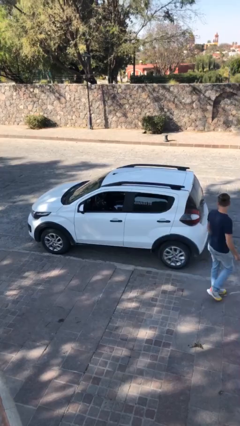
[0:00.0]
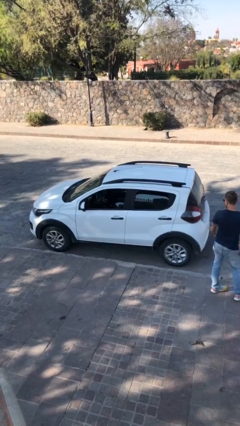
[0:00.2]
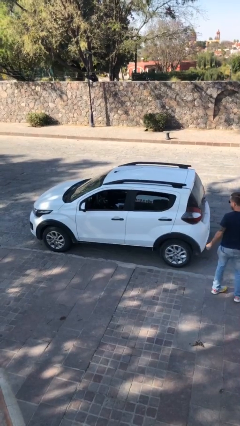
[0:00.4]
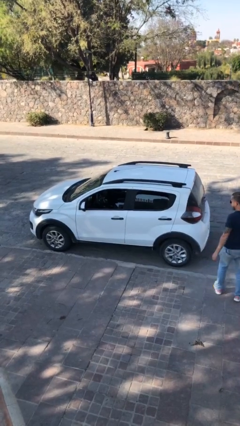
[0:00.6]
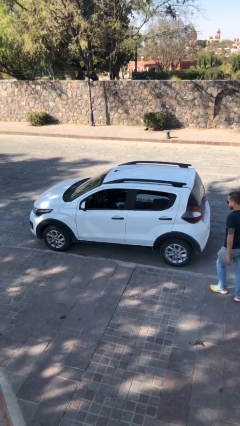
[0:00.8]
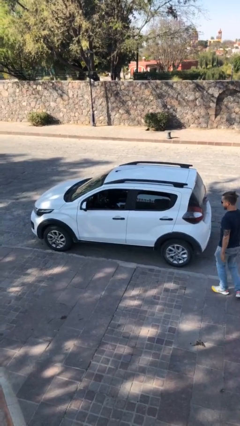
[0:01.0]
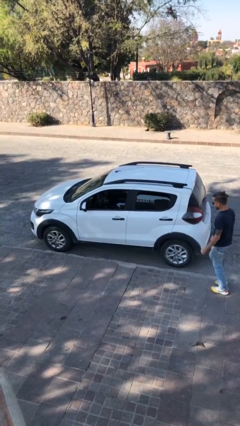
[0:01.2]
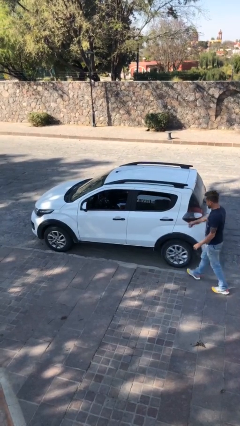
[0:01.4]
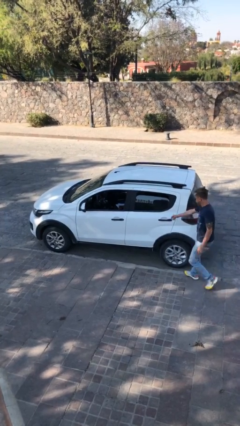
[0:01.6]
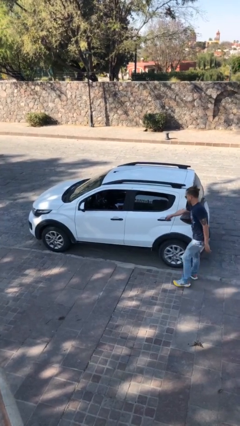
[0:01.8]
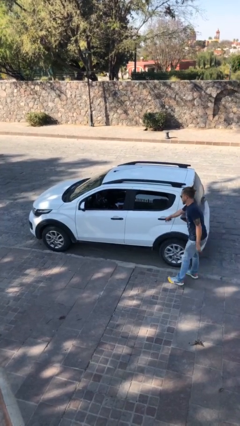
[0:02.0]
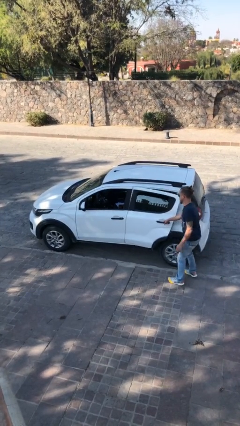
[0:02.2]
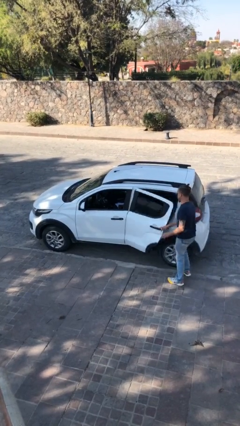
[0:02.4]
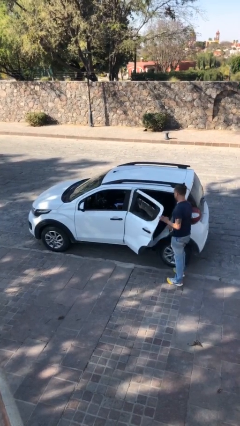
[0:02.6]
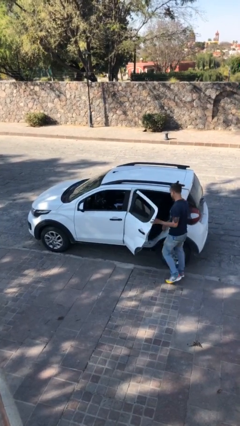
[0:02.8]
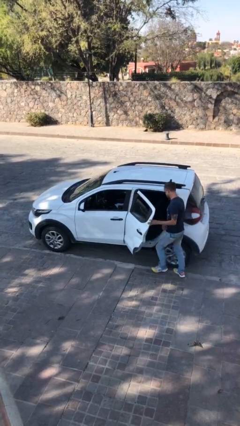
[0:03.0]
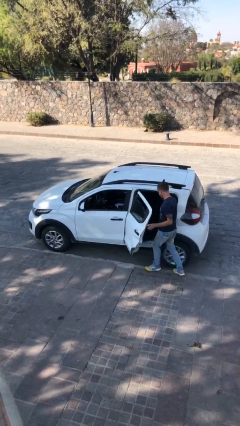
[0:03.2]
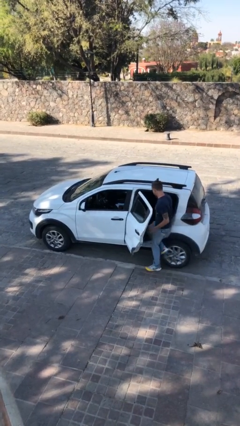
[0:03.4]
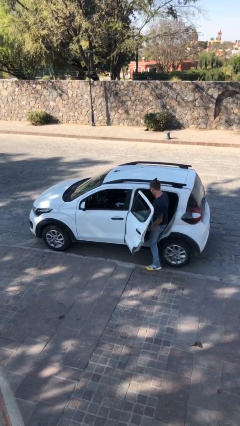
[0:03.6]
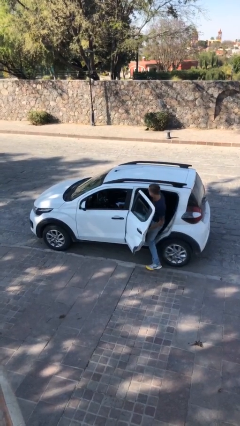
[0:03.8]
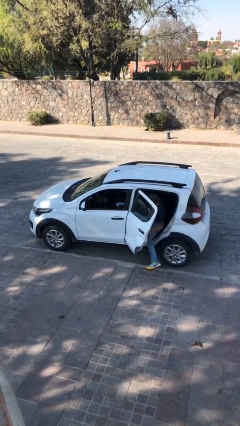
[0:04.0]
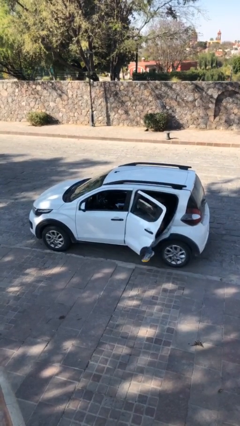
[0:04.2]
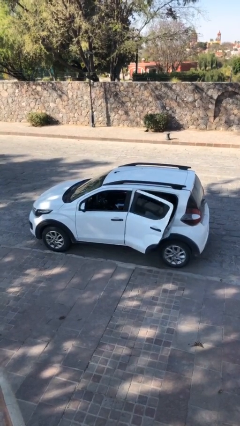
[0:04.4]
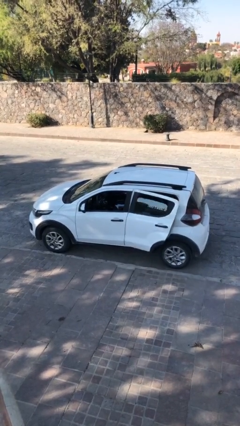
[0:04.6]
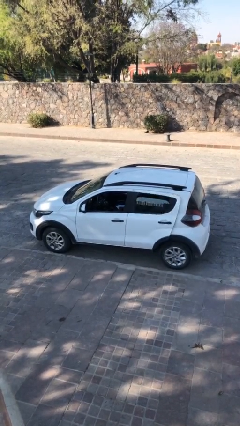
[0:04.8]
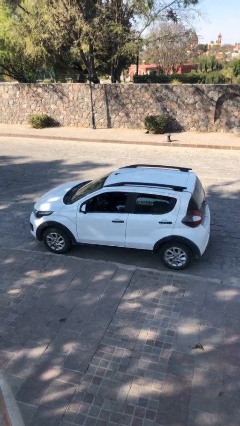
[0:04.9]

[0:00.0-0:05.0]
car picks up person

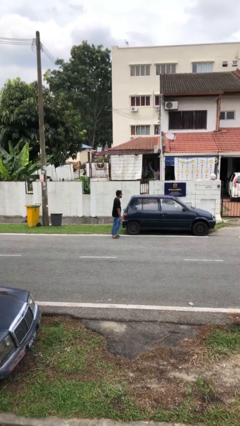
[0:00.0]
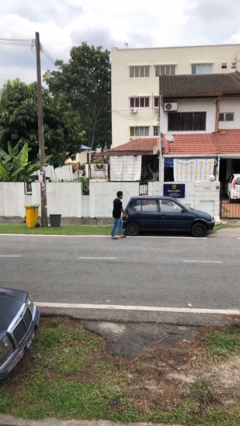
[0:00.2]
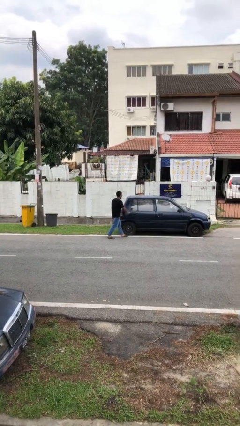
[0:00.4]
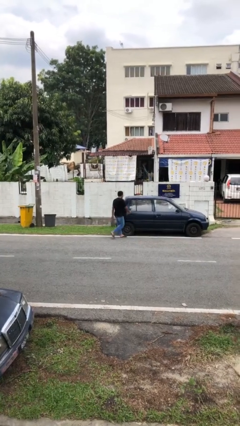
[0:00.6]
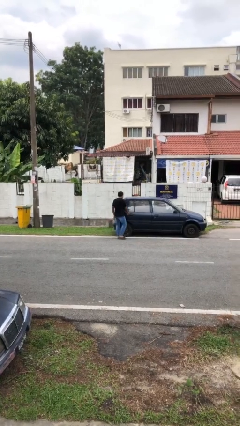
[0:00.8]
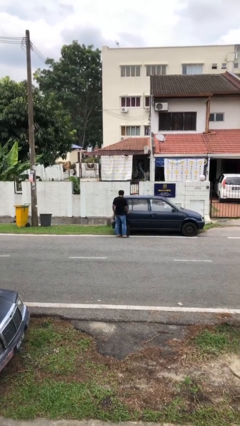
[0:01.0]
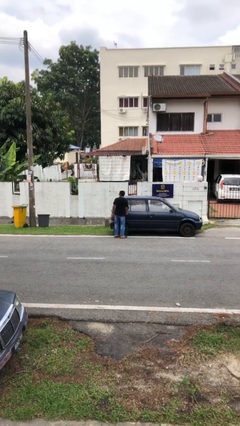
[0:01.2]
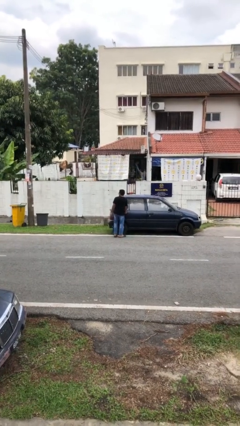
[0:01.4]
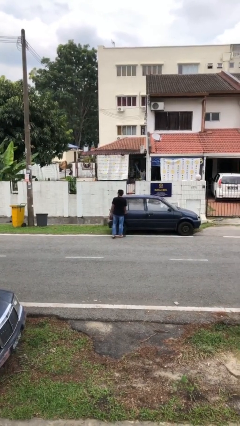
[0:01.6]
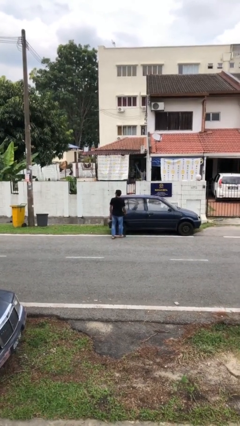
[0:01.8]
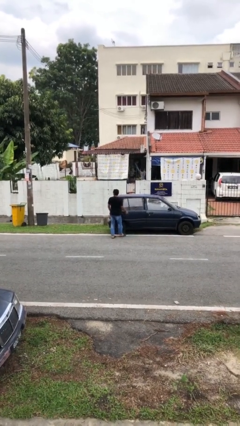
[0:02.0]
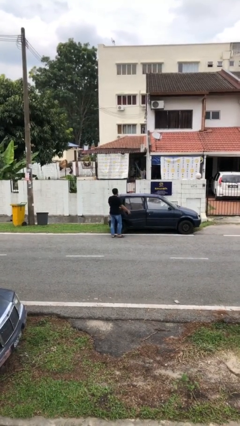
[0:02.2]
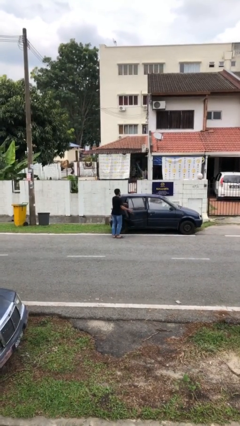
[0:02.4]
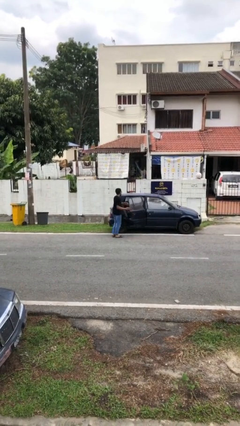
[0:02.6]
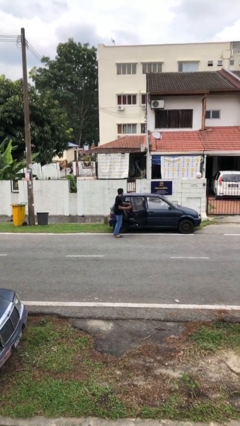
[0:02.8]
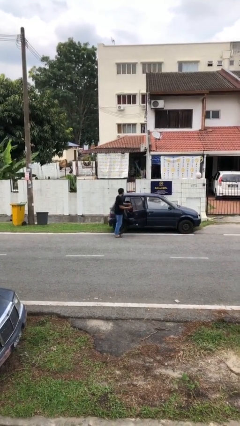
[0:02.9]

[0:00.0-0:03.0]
person opens car door

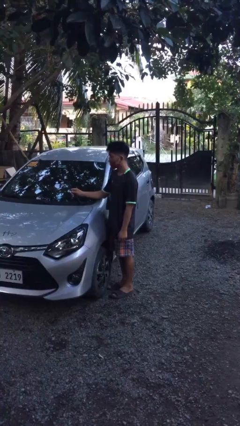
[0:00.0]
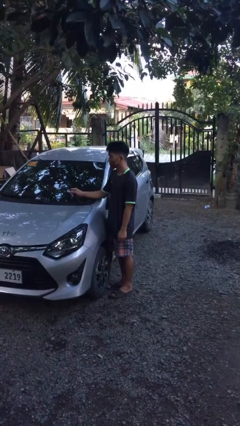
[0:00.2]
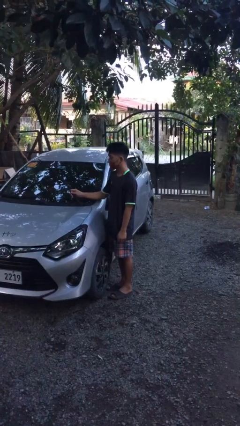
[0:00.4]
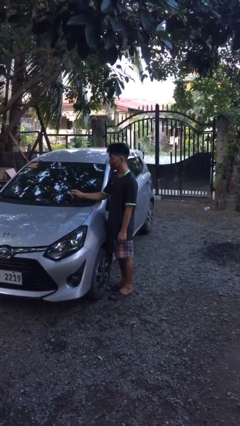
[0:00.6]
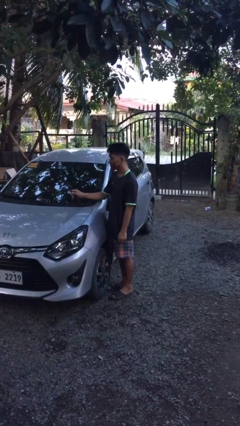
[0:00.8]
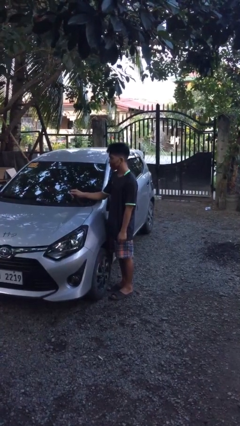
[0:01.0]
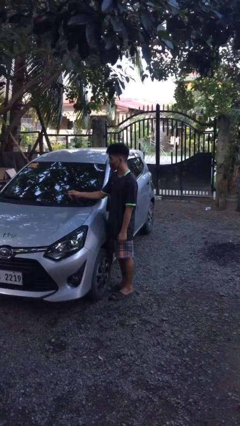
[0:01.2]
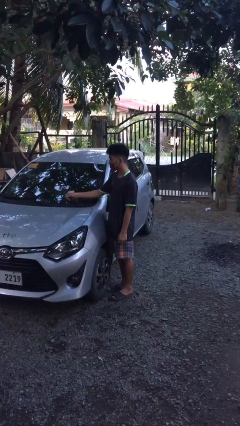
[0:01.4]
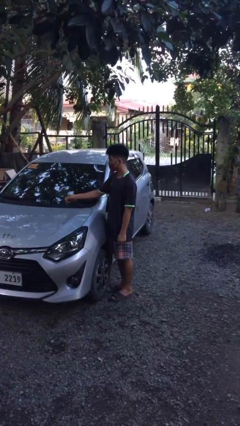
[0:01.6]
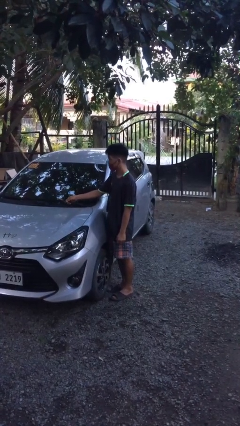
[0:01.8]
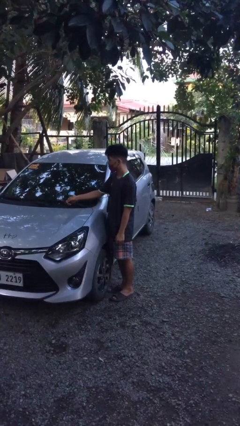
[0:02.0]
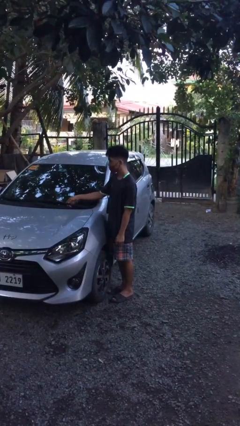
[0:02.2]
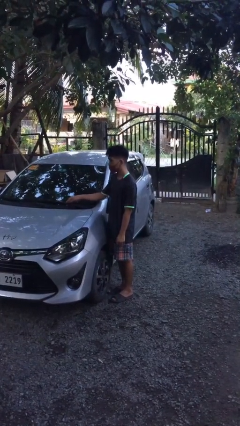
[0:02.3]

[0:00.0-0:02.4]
person flips down car wipers

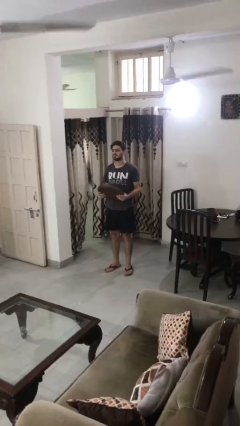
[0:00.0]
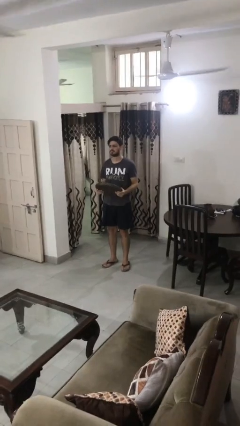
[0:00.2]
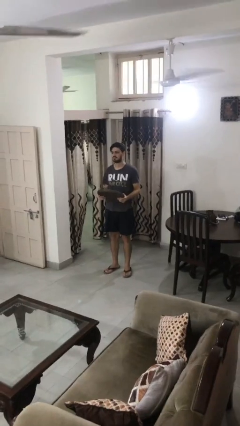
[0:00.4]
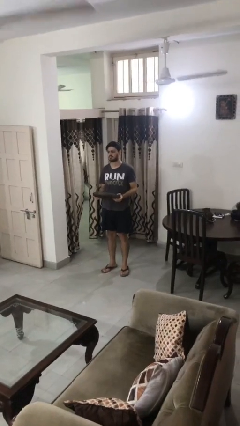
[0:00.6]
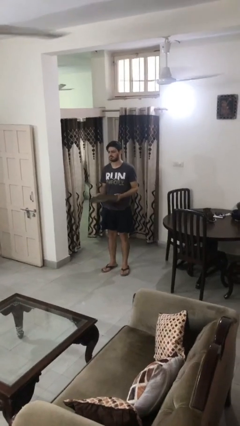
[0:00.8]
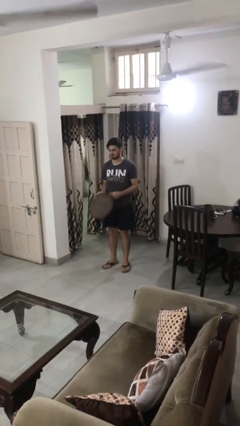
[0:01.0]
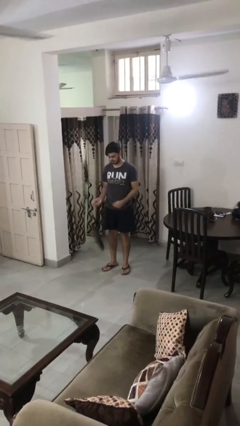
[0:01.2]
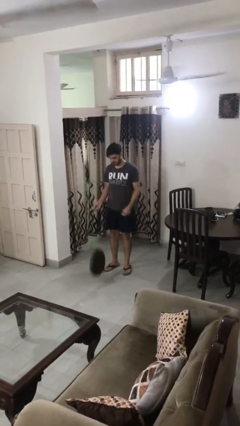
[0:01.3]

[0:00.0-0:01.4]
person drops object

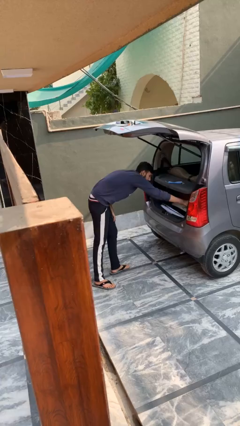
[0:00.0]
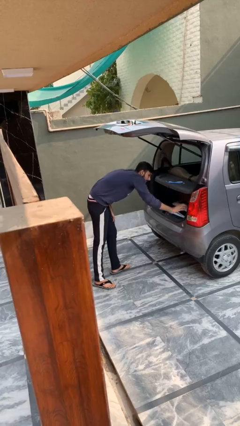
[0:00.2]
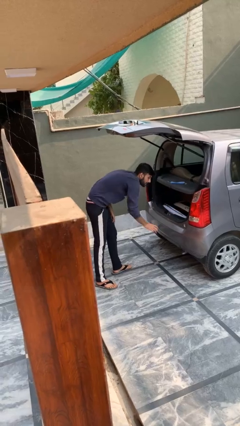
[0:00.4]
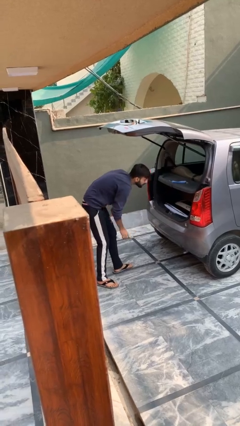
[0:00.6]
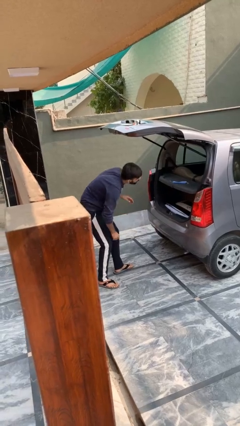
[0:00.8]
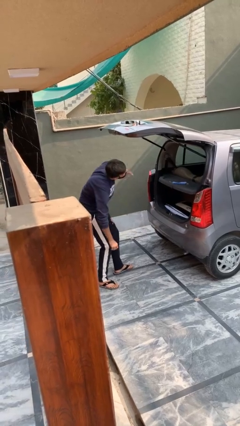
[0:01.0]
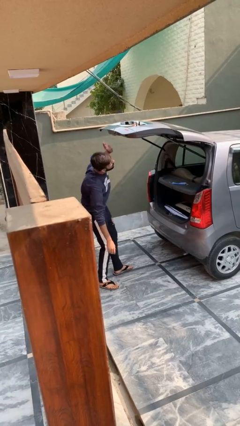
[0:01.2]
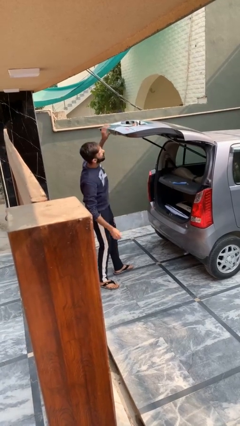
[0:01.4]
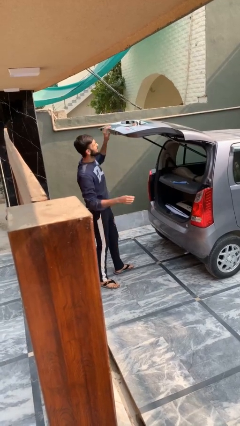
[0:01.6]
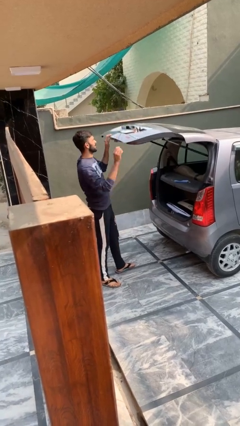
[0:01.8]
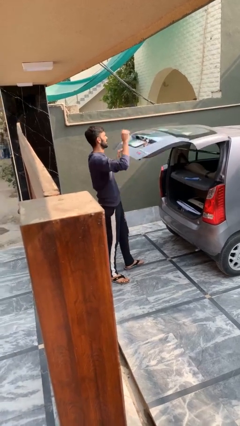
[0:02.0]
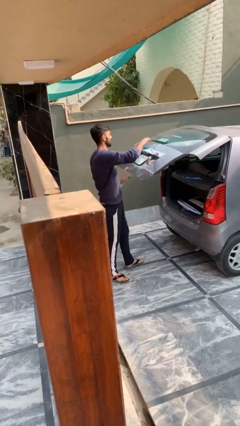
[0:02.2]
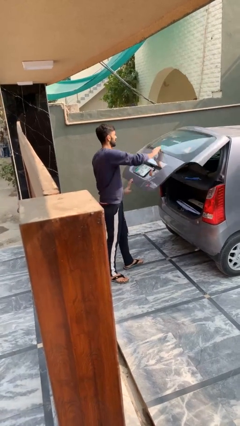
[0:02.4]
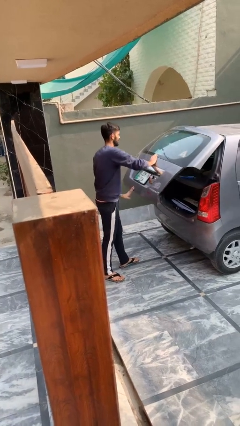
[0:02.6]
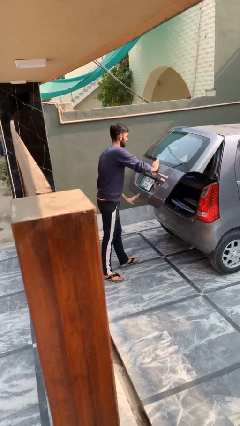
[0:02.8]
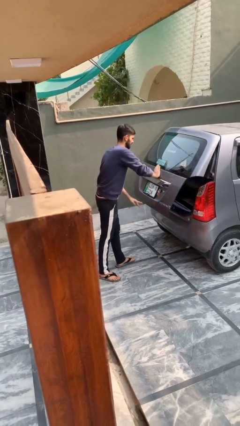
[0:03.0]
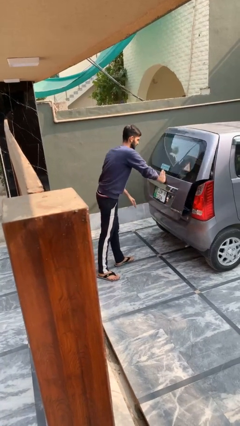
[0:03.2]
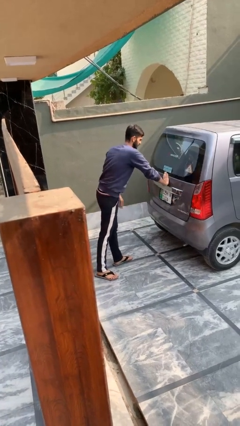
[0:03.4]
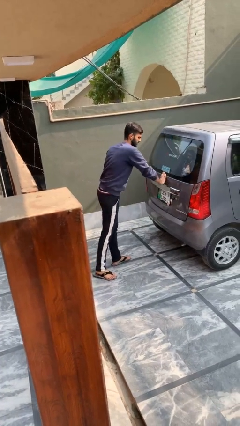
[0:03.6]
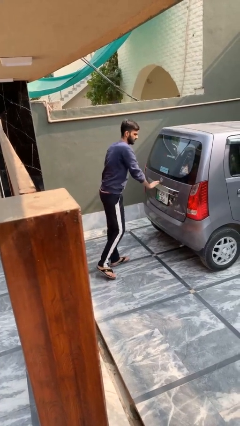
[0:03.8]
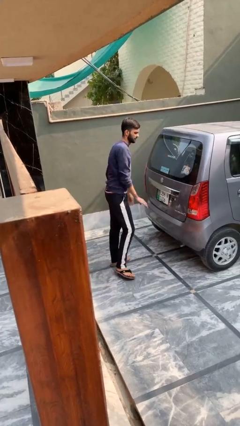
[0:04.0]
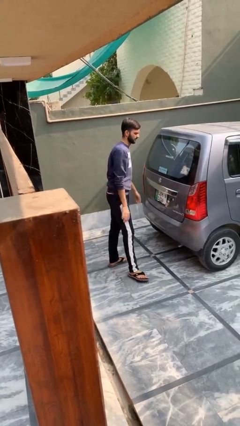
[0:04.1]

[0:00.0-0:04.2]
person closes car trunk

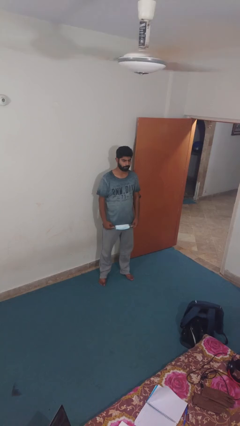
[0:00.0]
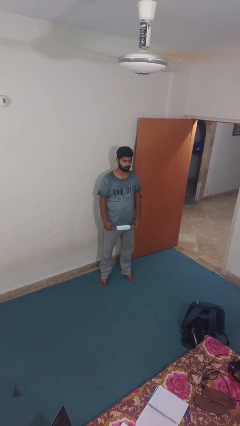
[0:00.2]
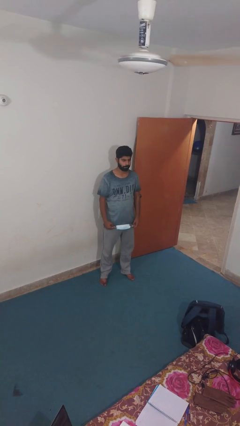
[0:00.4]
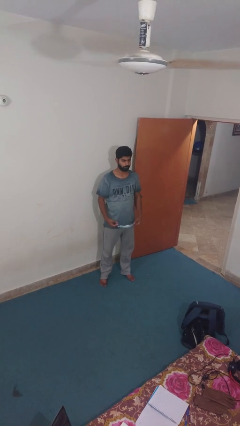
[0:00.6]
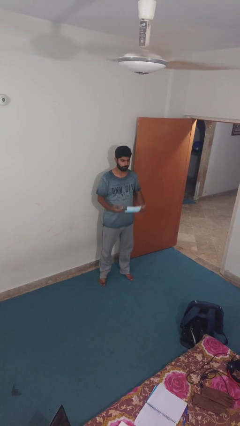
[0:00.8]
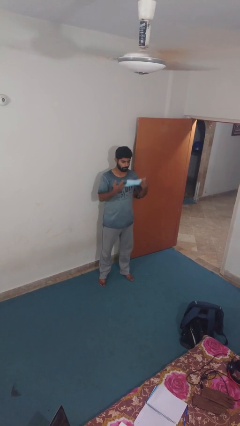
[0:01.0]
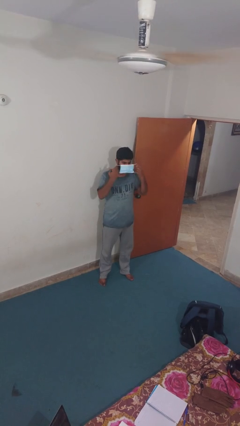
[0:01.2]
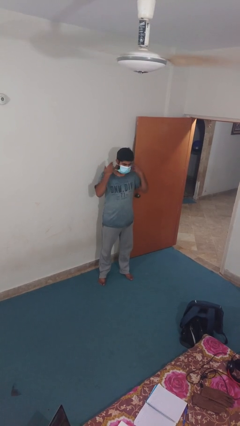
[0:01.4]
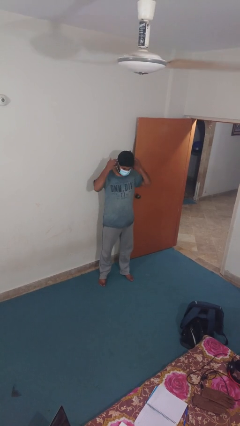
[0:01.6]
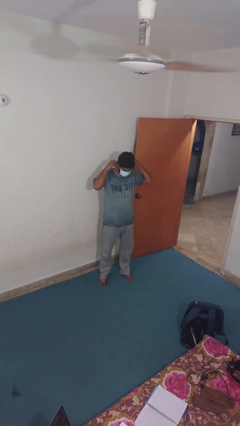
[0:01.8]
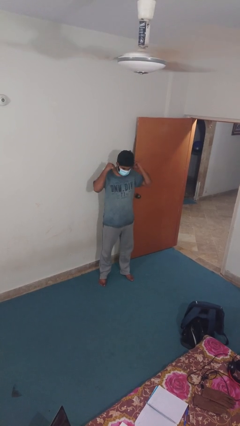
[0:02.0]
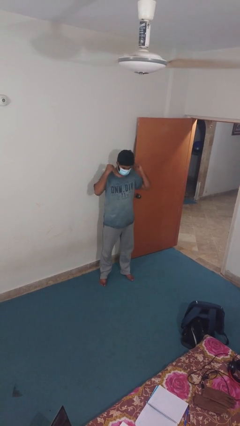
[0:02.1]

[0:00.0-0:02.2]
person puts on facemask
